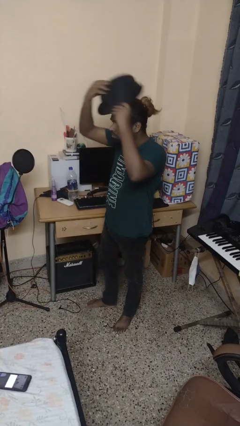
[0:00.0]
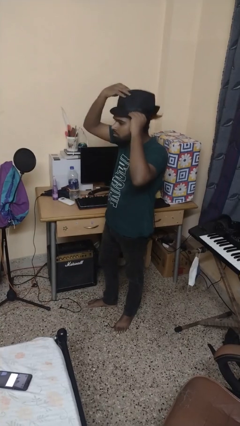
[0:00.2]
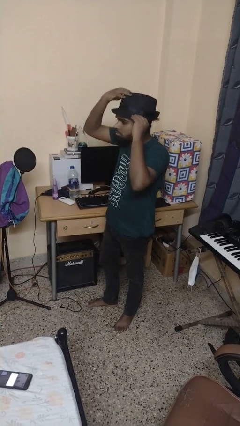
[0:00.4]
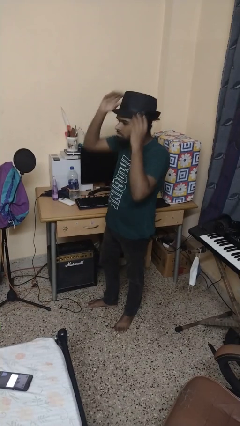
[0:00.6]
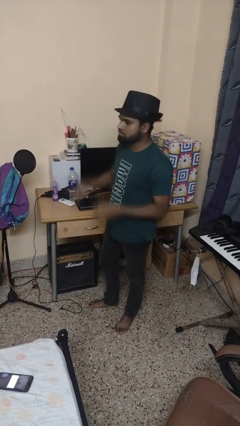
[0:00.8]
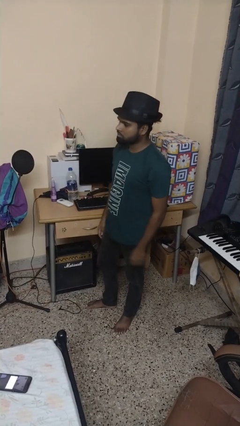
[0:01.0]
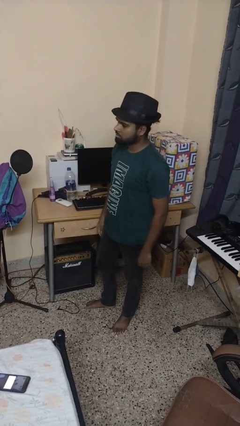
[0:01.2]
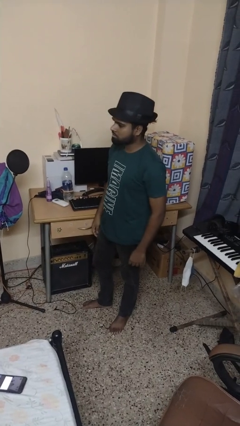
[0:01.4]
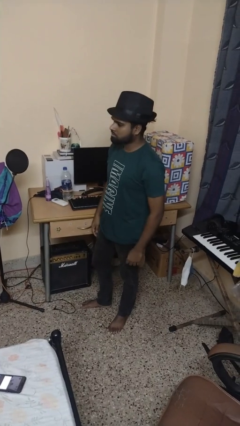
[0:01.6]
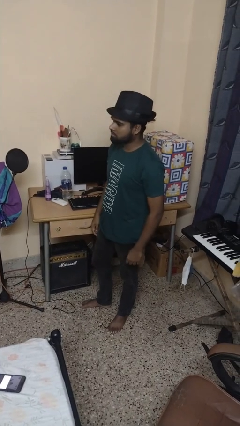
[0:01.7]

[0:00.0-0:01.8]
person puts on hat

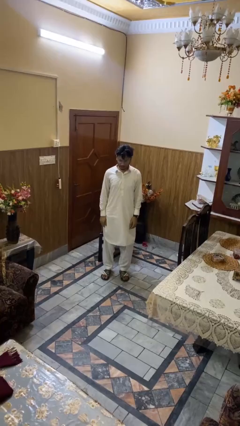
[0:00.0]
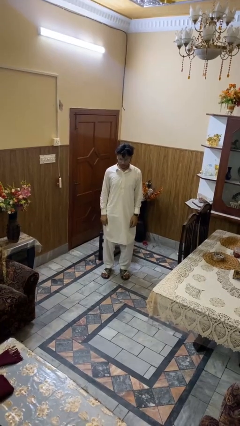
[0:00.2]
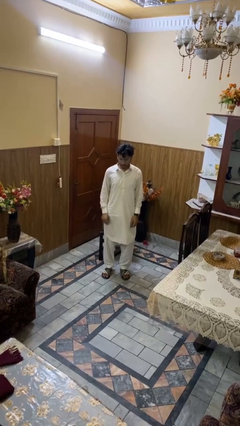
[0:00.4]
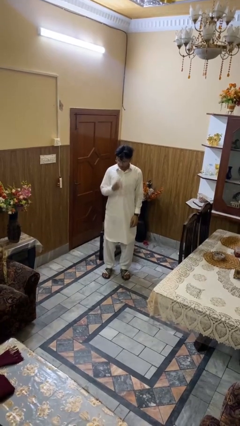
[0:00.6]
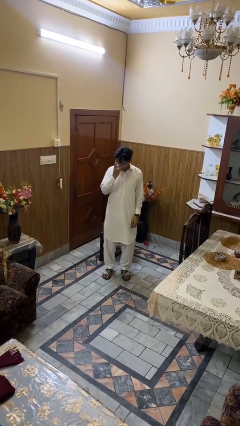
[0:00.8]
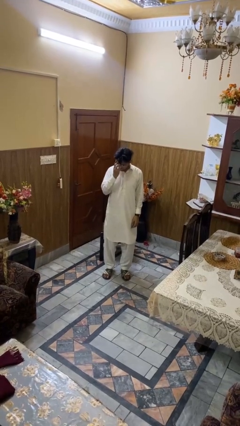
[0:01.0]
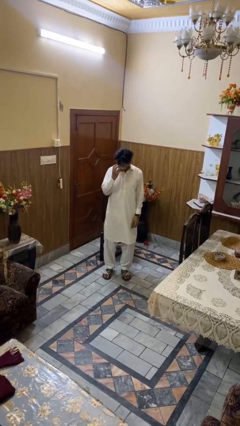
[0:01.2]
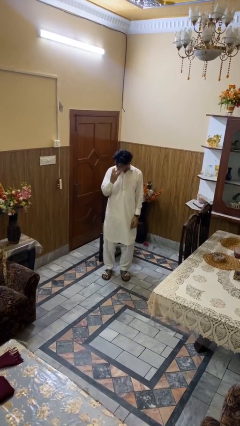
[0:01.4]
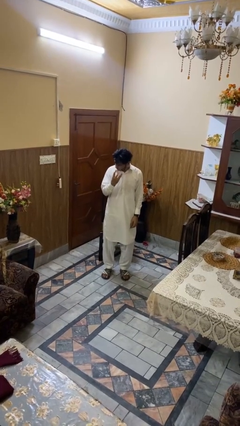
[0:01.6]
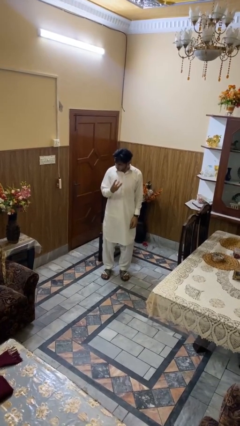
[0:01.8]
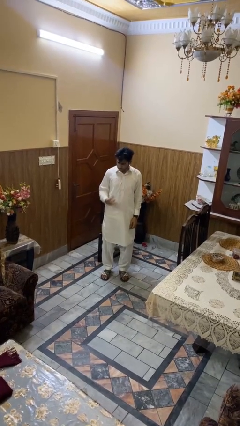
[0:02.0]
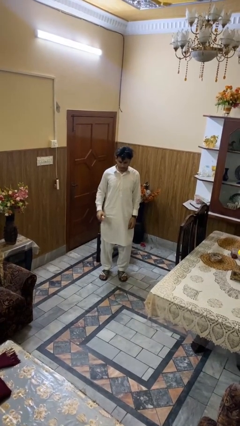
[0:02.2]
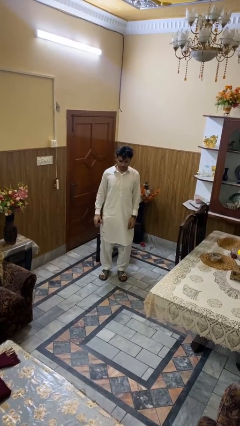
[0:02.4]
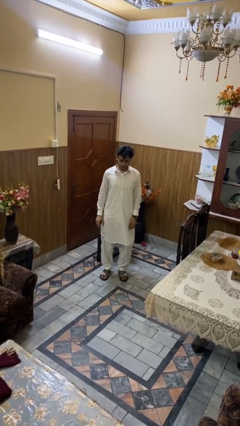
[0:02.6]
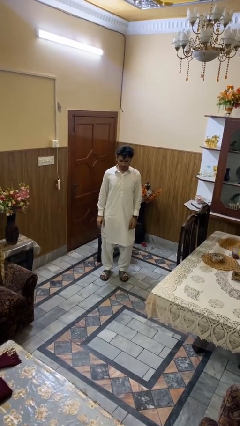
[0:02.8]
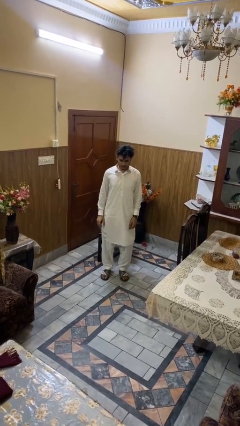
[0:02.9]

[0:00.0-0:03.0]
person takes off glasses

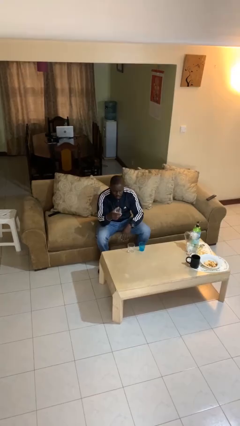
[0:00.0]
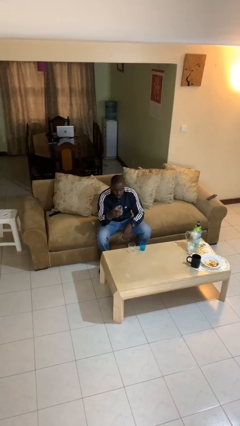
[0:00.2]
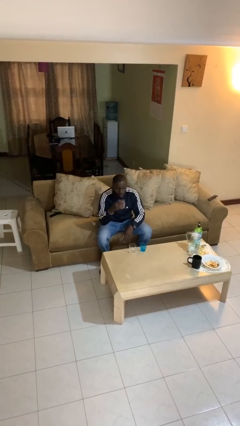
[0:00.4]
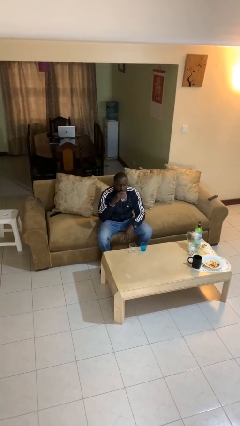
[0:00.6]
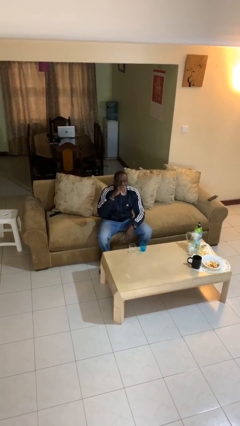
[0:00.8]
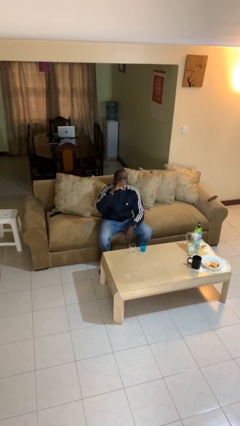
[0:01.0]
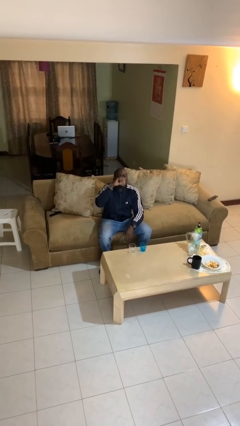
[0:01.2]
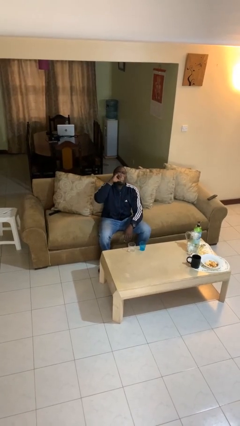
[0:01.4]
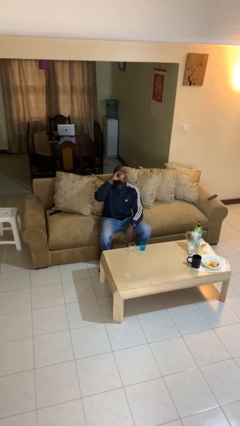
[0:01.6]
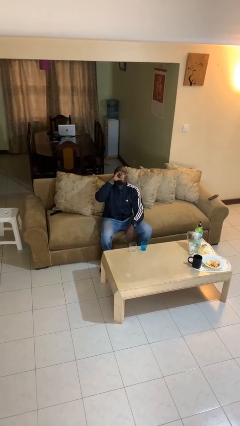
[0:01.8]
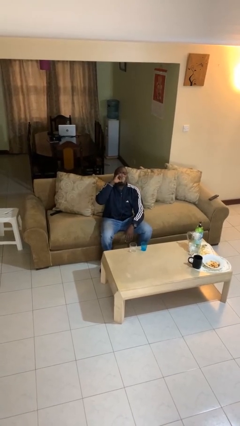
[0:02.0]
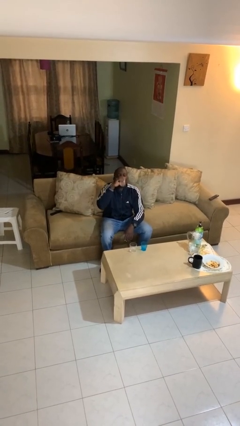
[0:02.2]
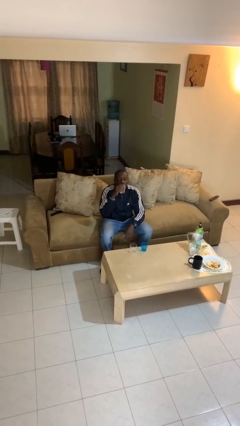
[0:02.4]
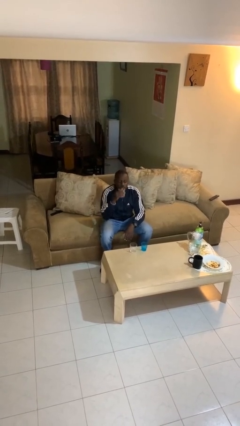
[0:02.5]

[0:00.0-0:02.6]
person drinks from shotglass

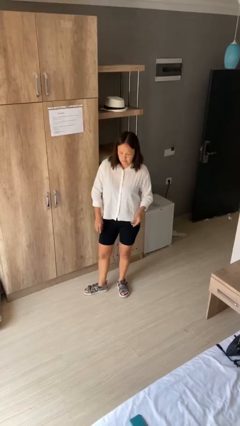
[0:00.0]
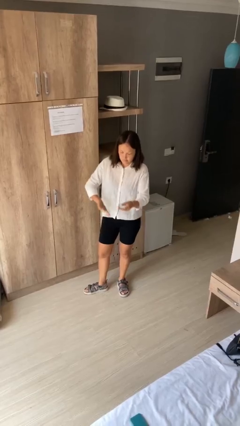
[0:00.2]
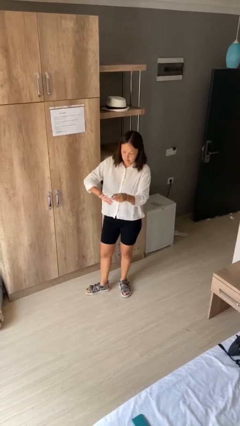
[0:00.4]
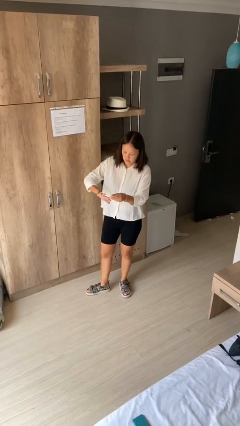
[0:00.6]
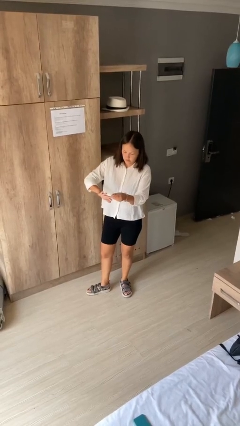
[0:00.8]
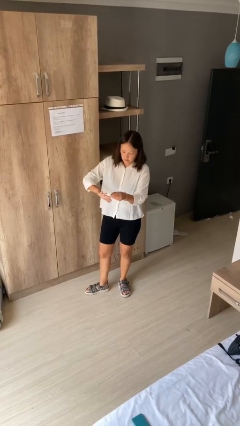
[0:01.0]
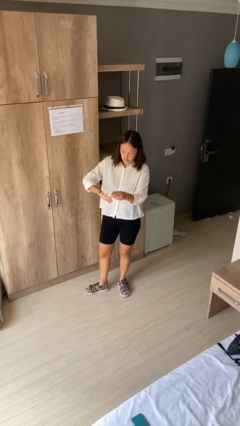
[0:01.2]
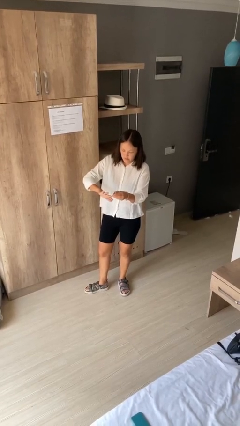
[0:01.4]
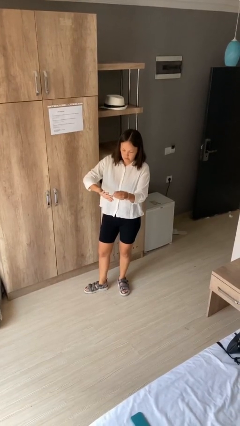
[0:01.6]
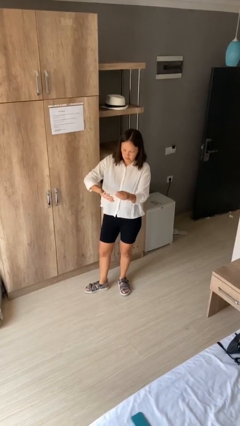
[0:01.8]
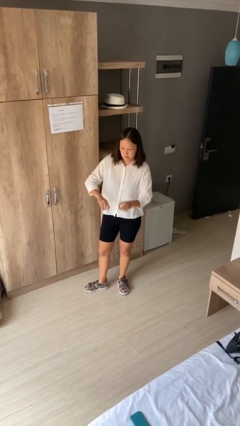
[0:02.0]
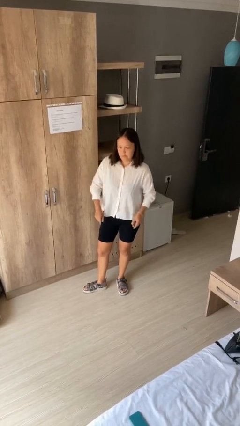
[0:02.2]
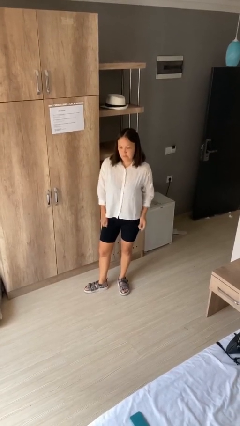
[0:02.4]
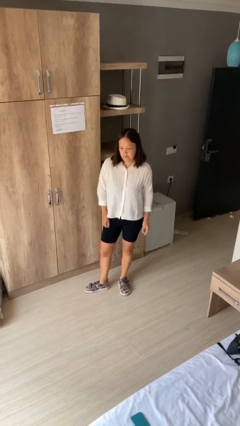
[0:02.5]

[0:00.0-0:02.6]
person clips fingernails

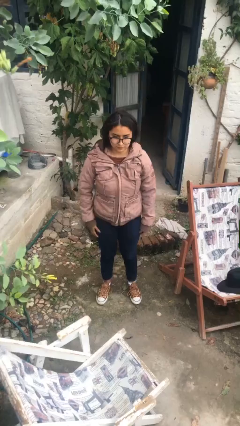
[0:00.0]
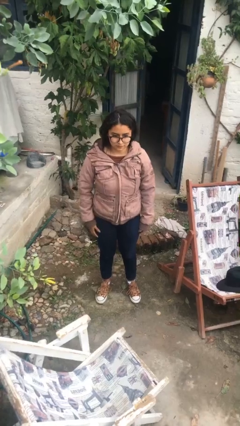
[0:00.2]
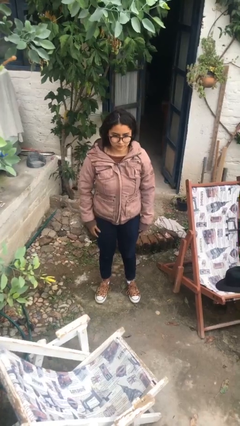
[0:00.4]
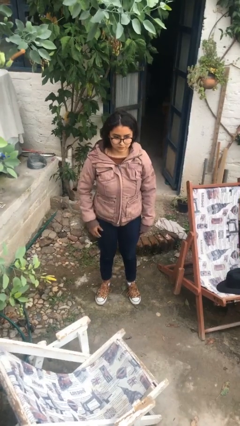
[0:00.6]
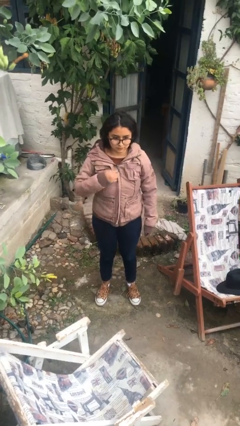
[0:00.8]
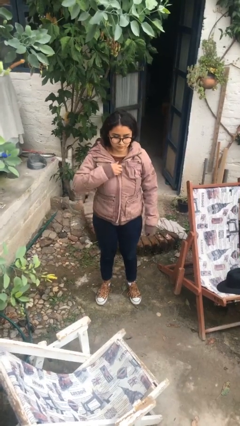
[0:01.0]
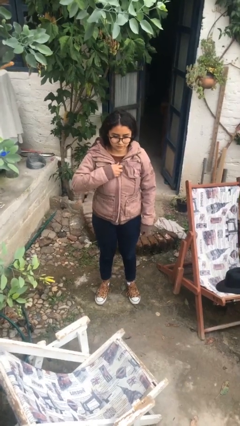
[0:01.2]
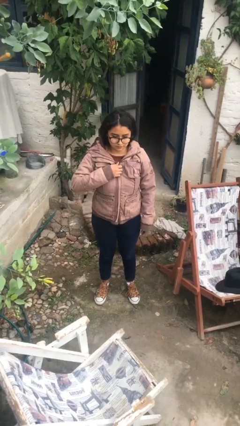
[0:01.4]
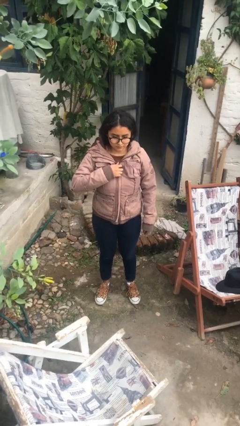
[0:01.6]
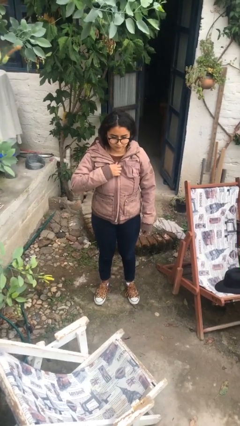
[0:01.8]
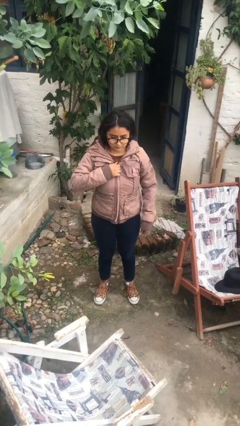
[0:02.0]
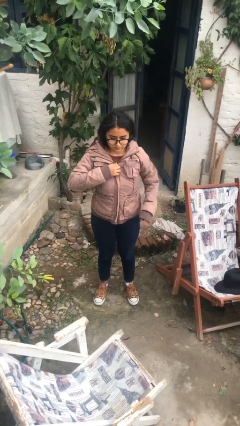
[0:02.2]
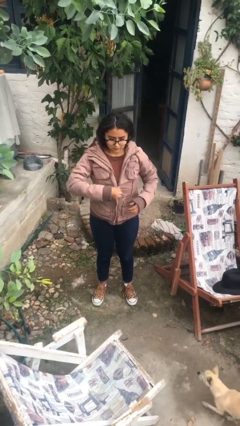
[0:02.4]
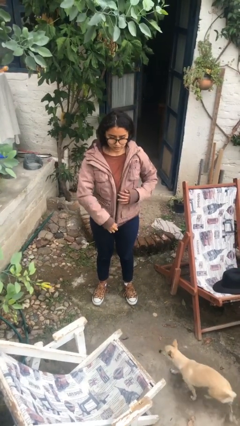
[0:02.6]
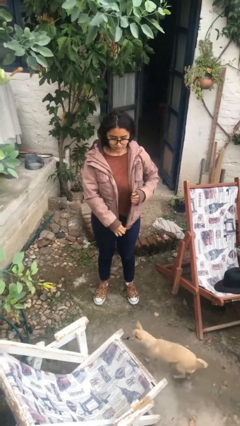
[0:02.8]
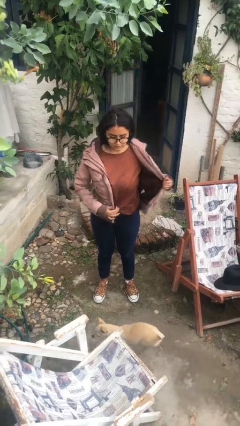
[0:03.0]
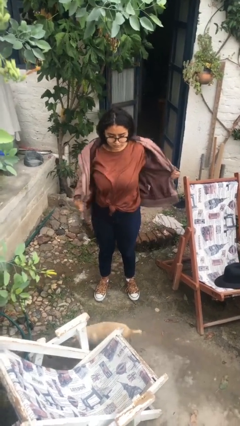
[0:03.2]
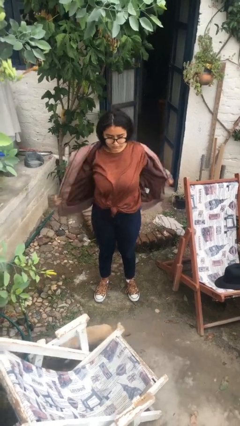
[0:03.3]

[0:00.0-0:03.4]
person unzips jacket

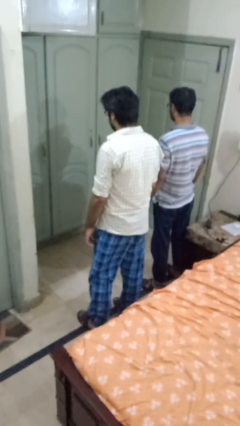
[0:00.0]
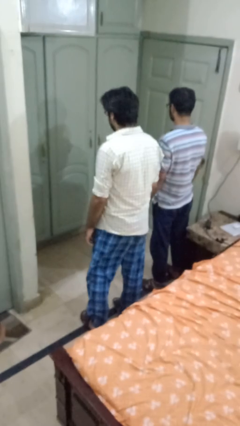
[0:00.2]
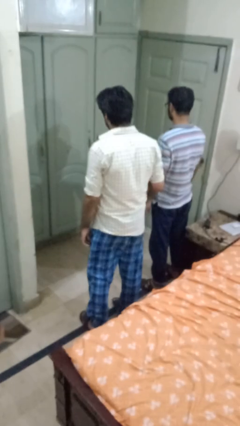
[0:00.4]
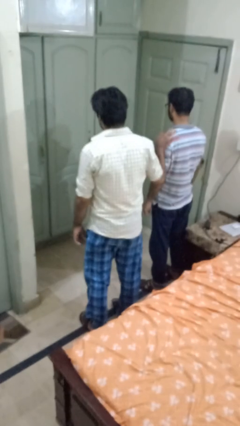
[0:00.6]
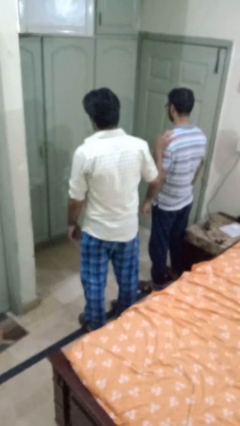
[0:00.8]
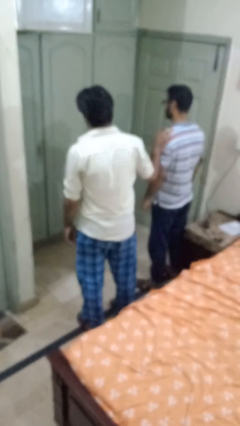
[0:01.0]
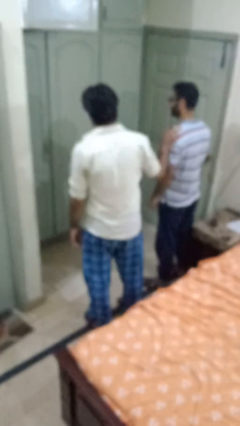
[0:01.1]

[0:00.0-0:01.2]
person grabs person by shoulder

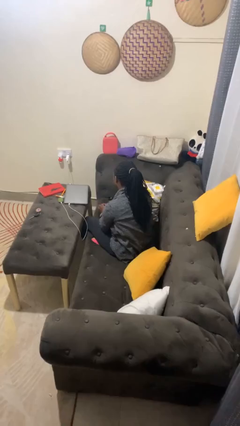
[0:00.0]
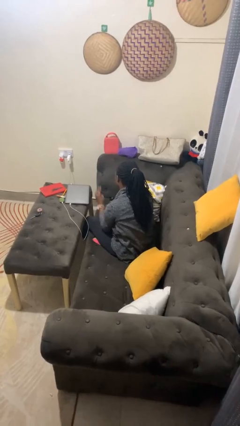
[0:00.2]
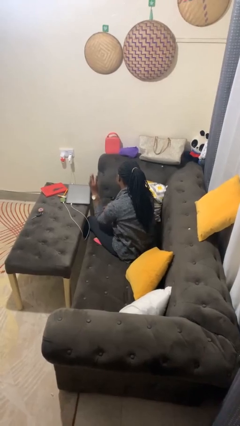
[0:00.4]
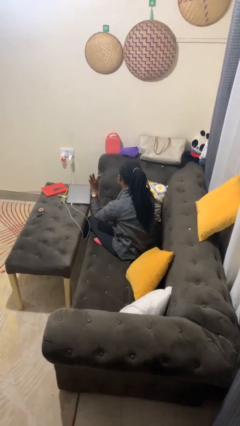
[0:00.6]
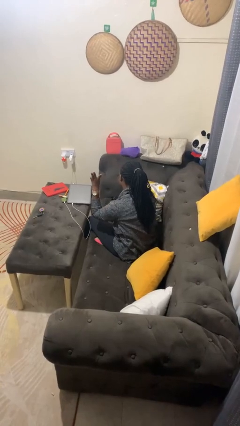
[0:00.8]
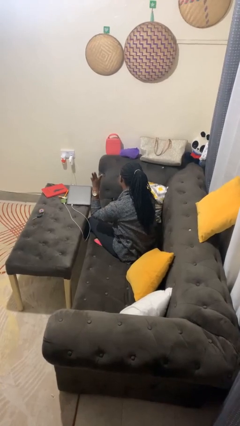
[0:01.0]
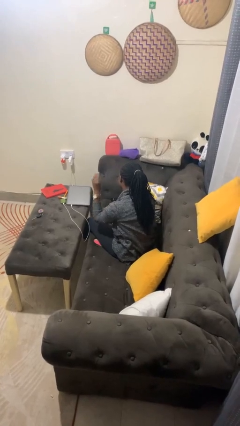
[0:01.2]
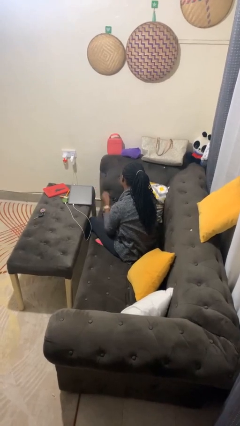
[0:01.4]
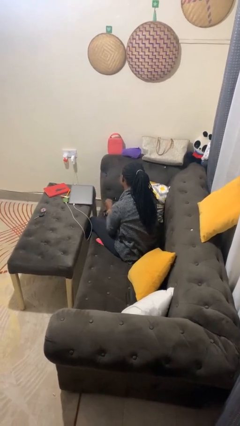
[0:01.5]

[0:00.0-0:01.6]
person gestures number three

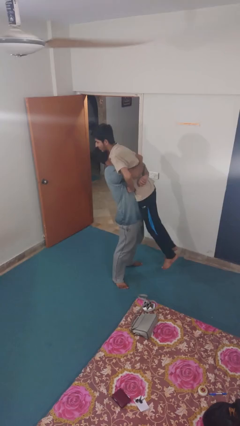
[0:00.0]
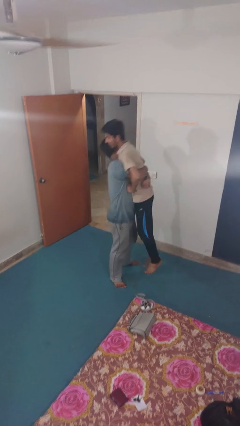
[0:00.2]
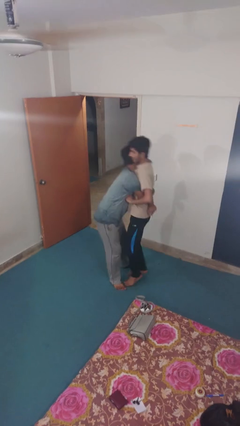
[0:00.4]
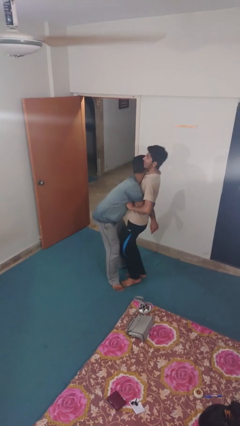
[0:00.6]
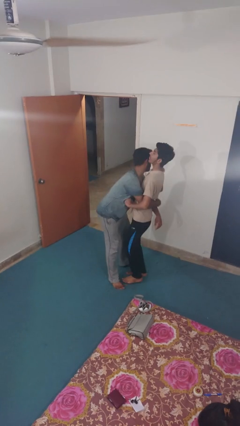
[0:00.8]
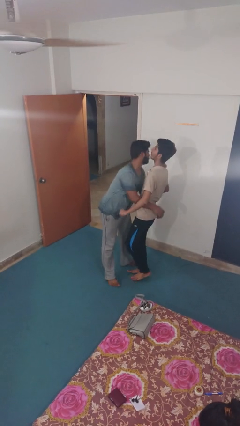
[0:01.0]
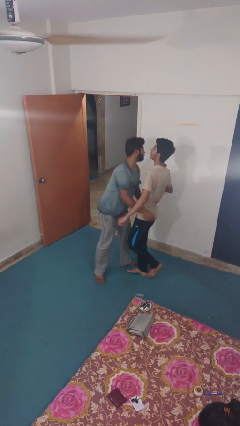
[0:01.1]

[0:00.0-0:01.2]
person puts down person
